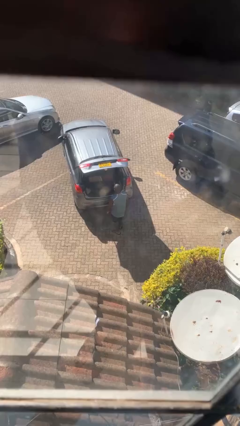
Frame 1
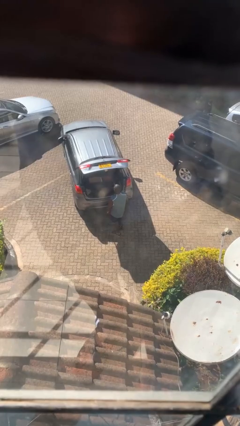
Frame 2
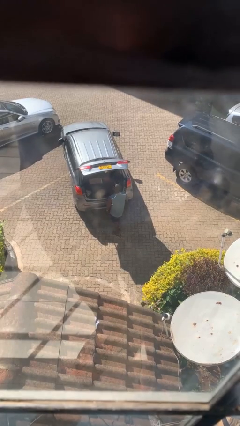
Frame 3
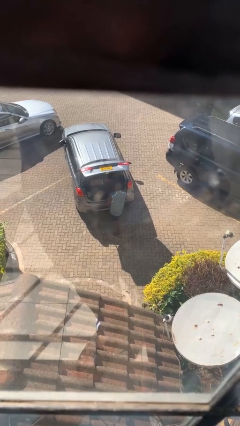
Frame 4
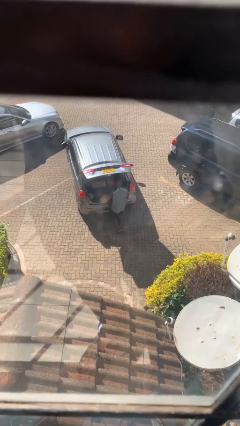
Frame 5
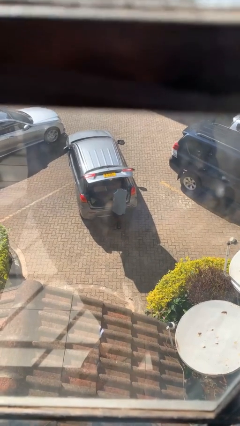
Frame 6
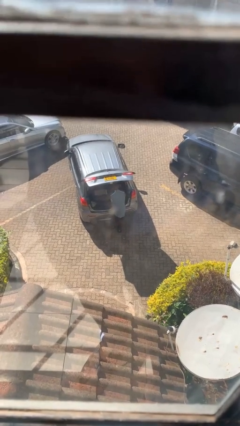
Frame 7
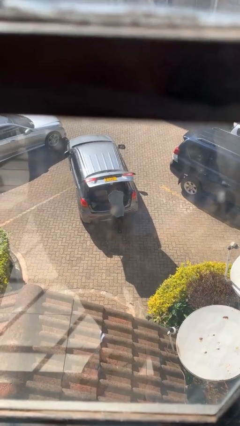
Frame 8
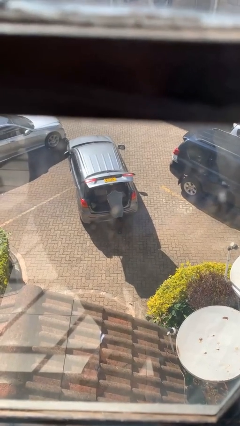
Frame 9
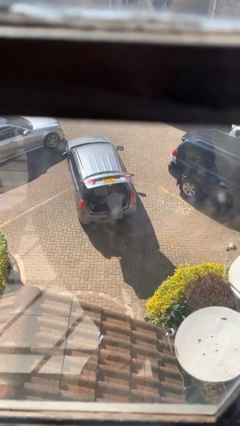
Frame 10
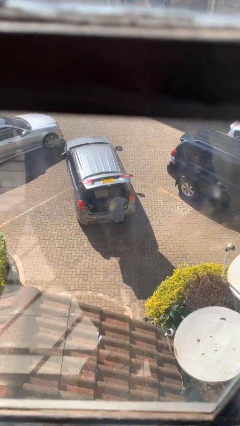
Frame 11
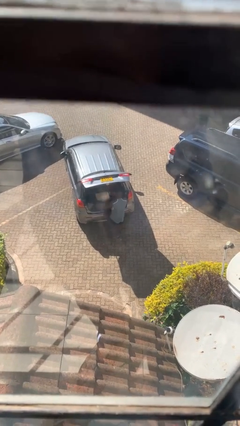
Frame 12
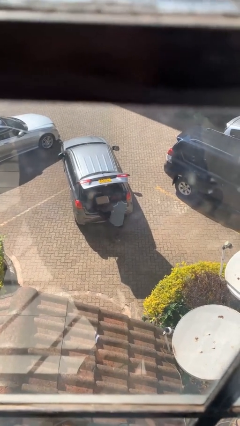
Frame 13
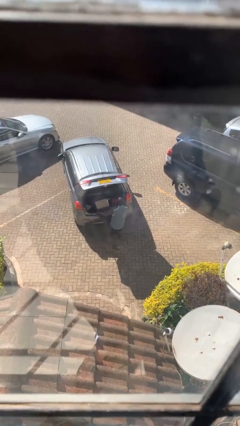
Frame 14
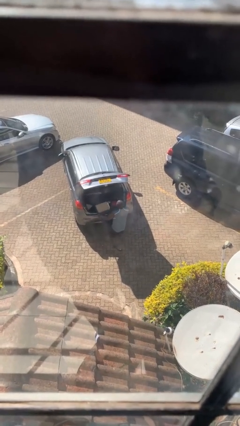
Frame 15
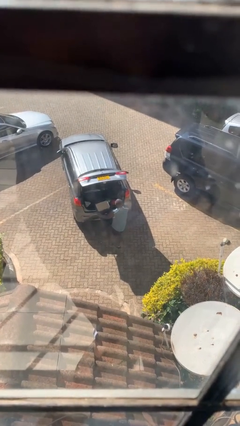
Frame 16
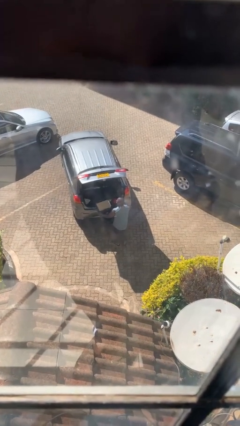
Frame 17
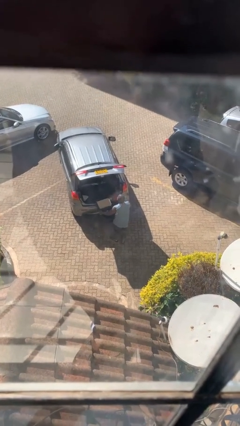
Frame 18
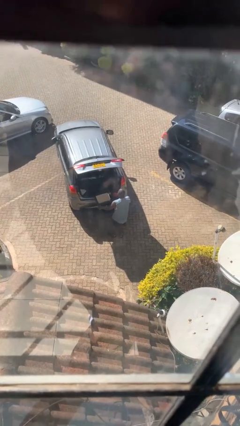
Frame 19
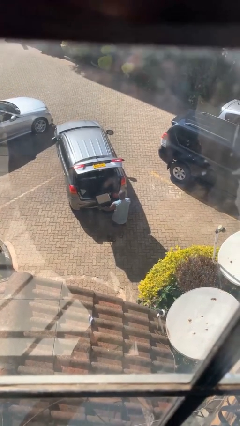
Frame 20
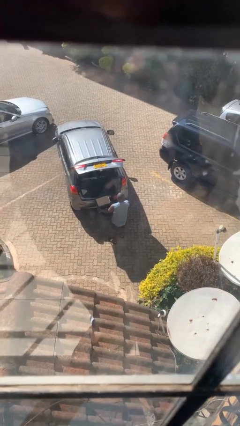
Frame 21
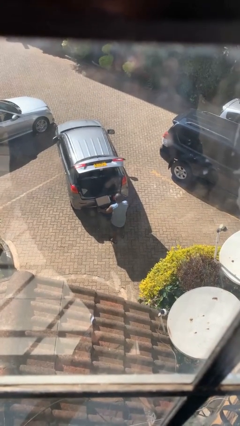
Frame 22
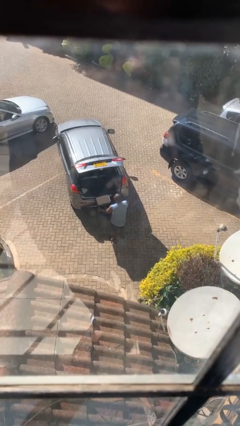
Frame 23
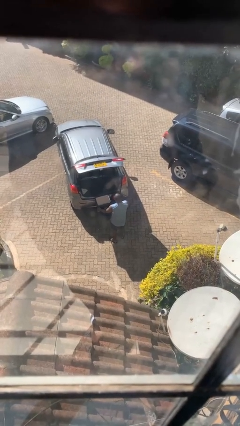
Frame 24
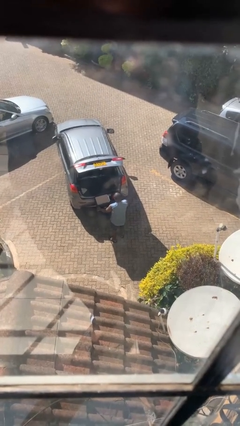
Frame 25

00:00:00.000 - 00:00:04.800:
person unloads car

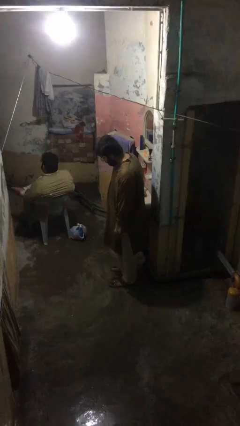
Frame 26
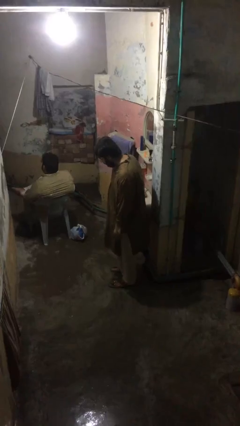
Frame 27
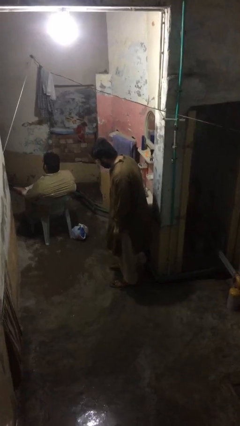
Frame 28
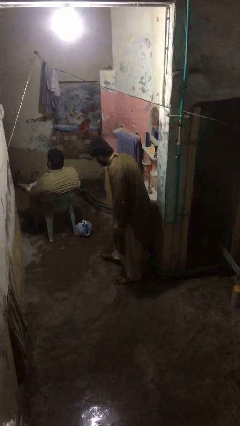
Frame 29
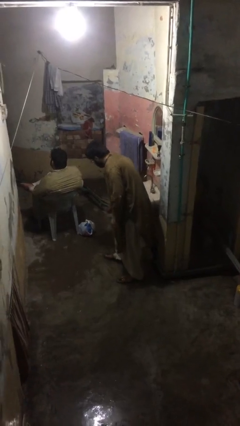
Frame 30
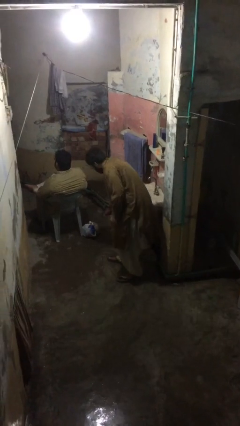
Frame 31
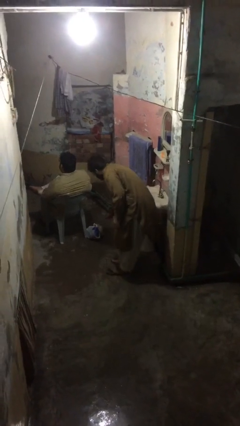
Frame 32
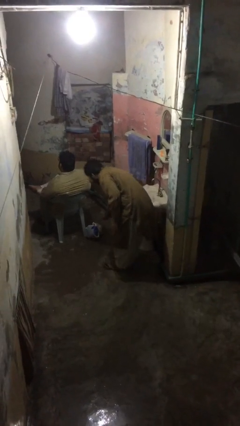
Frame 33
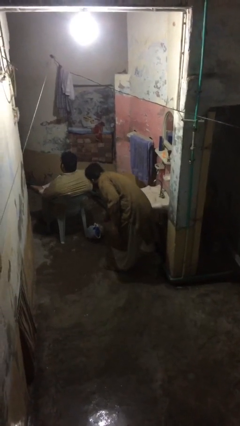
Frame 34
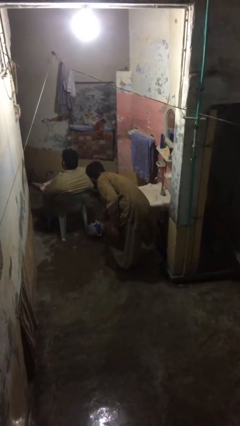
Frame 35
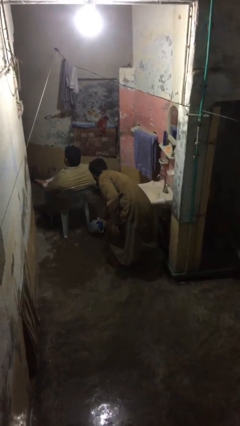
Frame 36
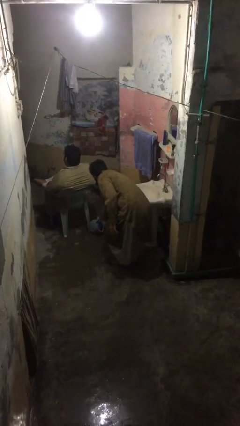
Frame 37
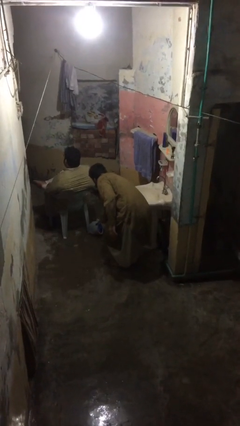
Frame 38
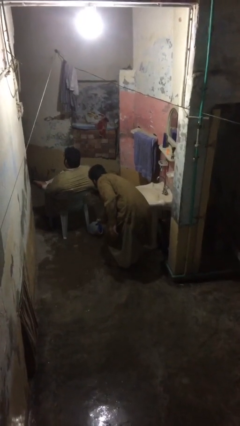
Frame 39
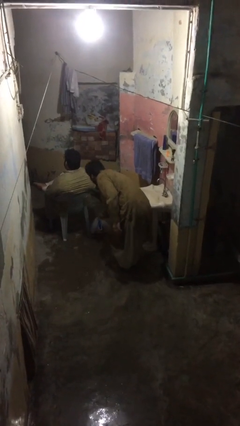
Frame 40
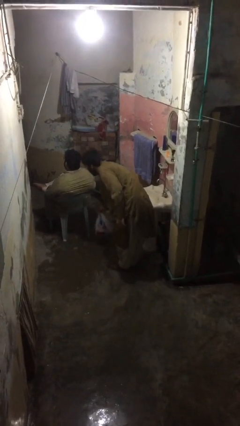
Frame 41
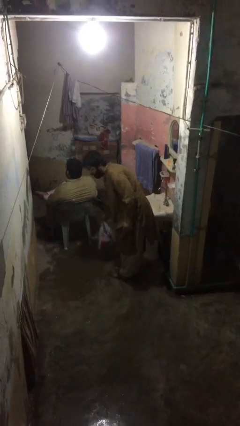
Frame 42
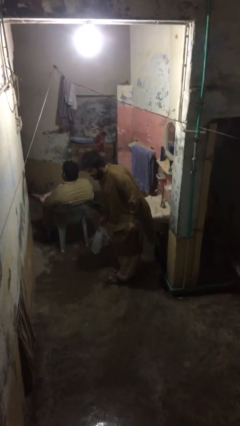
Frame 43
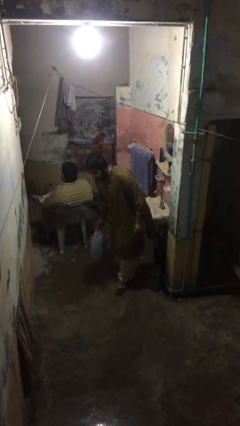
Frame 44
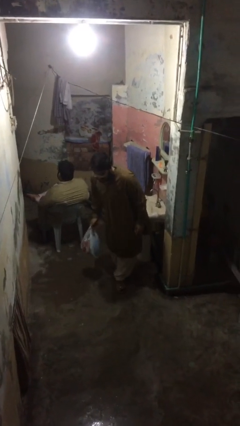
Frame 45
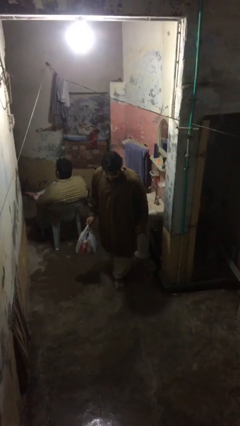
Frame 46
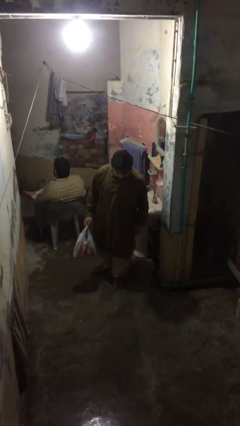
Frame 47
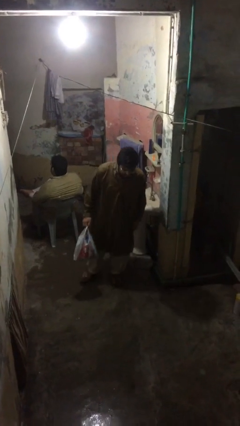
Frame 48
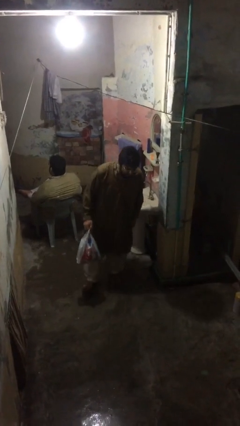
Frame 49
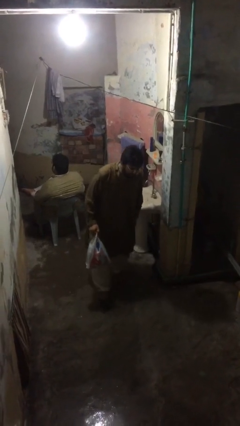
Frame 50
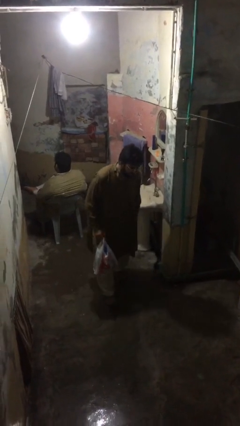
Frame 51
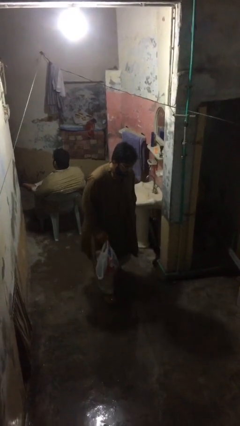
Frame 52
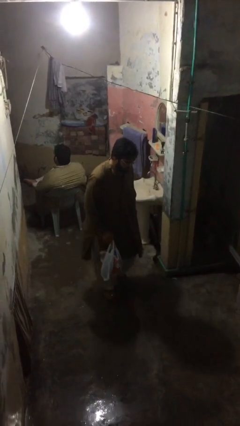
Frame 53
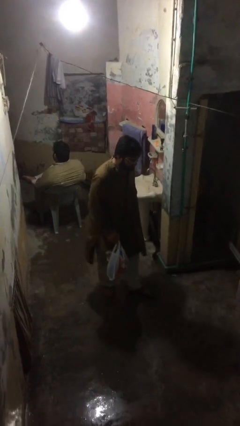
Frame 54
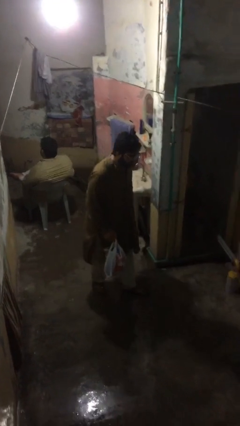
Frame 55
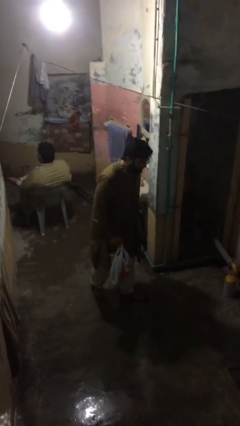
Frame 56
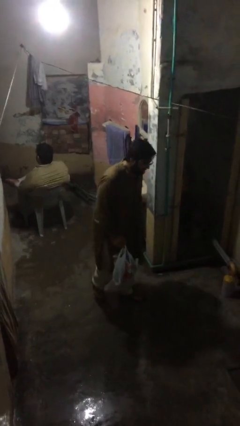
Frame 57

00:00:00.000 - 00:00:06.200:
person steals object from person

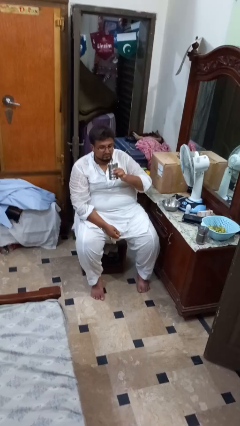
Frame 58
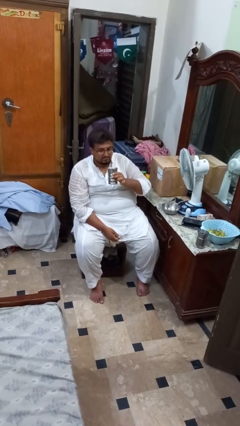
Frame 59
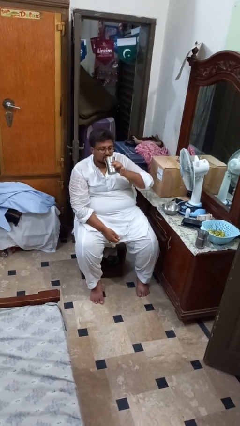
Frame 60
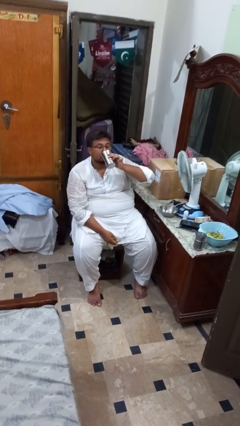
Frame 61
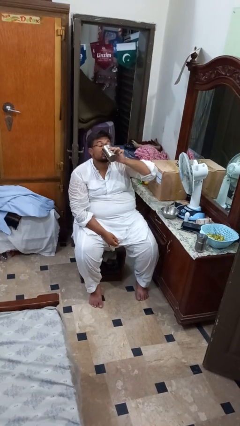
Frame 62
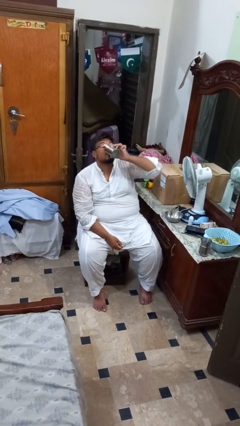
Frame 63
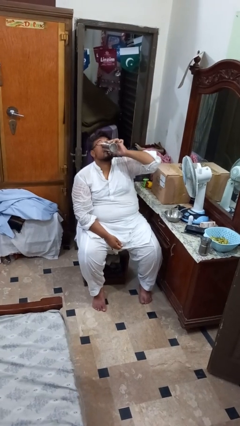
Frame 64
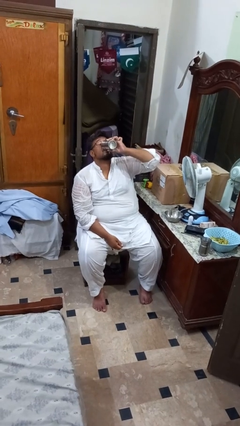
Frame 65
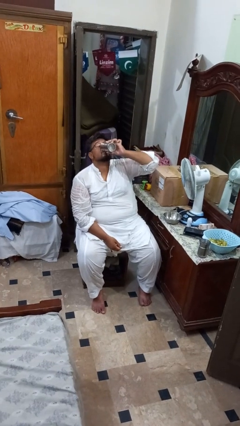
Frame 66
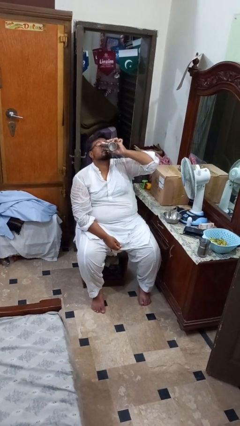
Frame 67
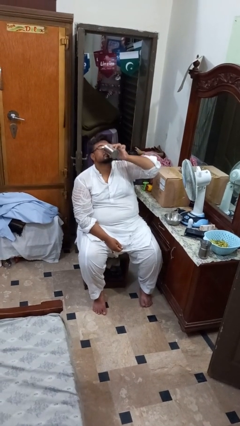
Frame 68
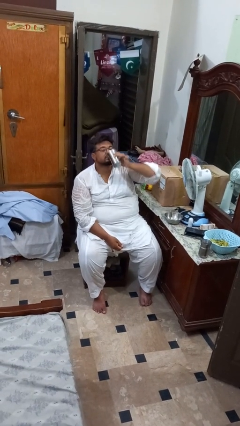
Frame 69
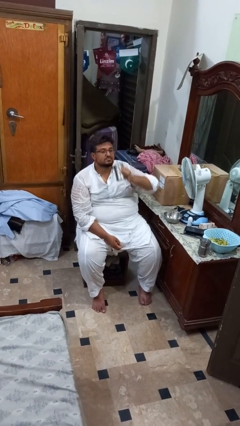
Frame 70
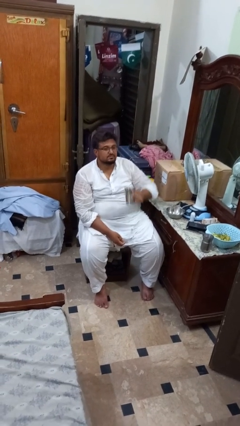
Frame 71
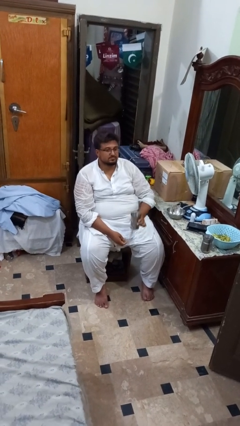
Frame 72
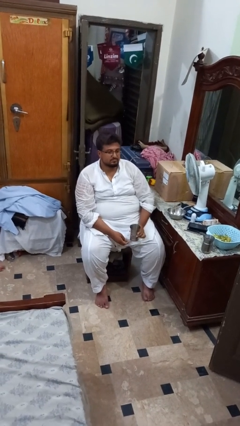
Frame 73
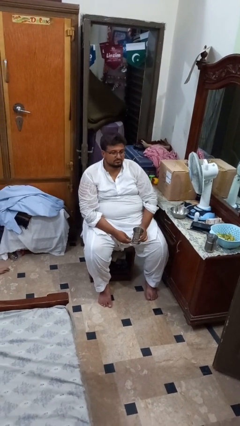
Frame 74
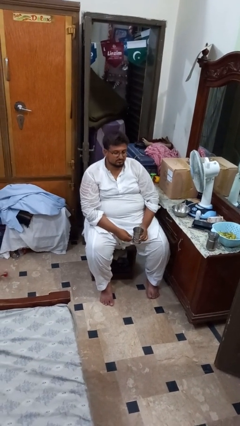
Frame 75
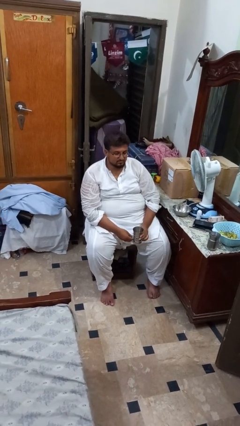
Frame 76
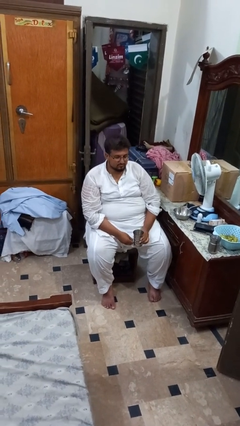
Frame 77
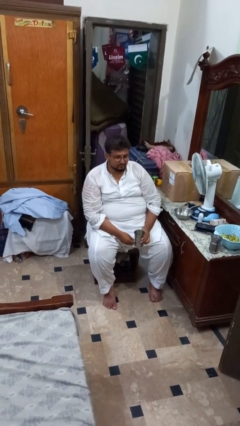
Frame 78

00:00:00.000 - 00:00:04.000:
person drinks from cup

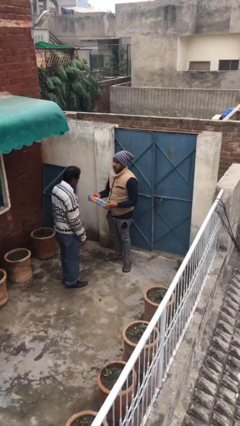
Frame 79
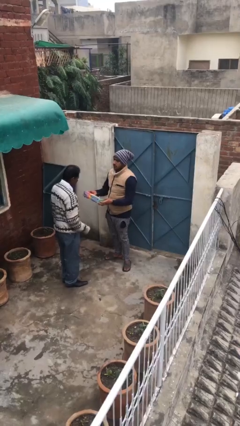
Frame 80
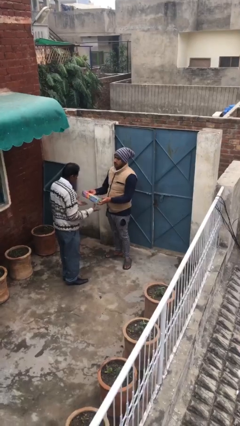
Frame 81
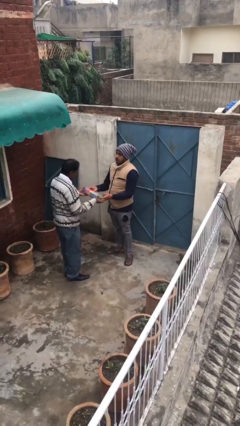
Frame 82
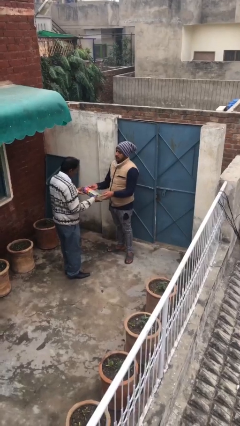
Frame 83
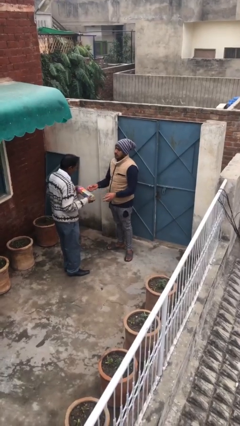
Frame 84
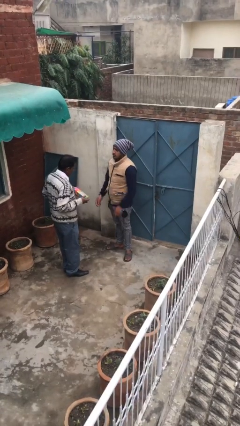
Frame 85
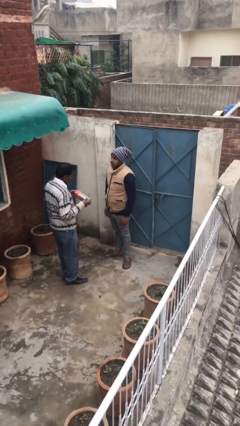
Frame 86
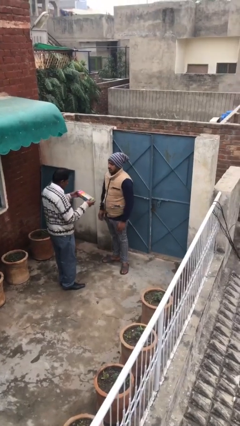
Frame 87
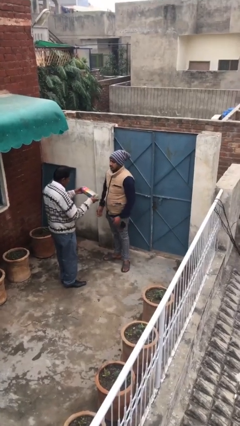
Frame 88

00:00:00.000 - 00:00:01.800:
person transfers object to person

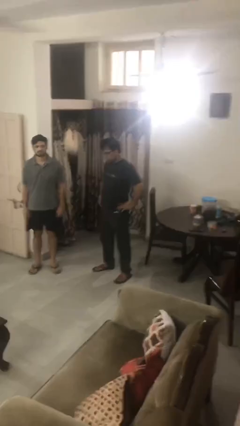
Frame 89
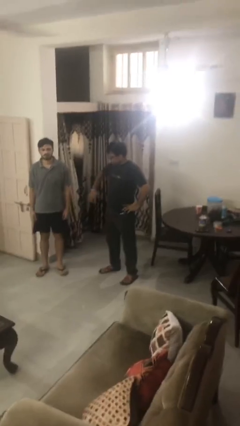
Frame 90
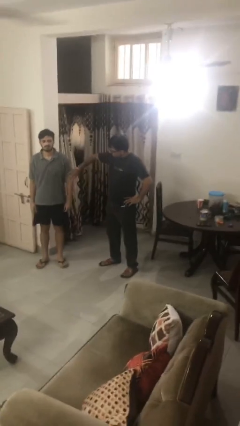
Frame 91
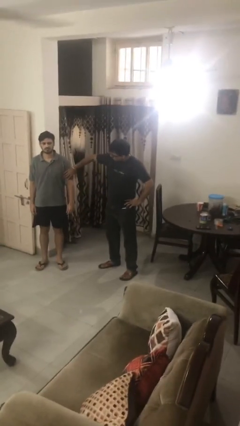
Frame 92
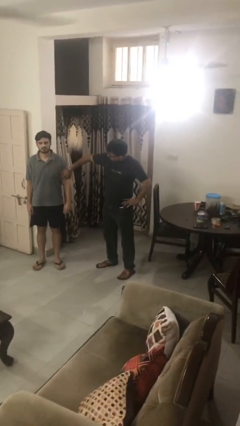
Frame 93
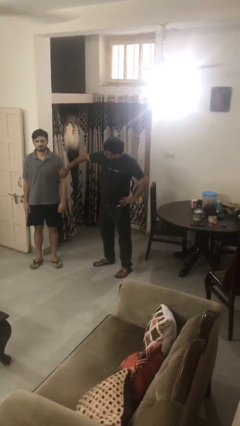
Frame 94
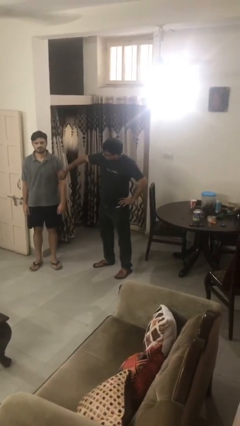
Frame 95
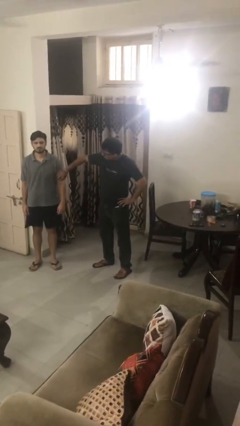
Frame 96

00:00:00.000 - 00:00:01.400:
person grabs person by bicep
